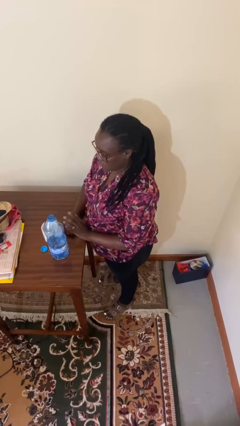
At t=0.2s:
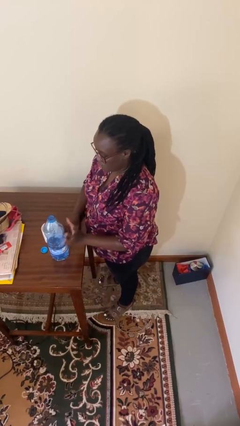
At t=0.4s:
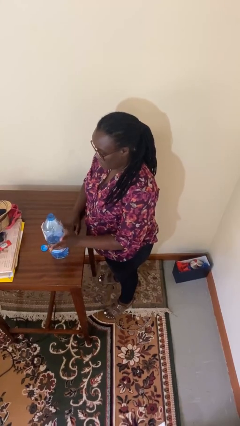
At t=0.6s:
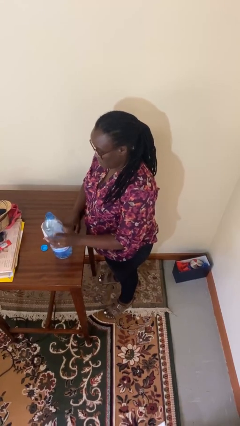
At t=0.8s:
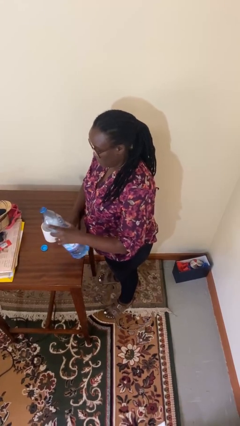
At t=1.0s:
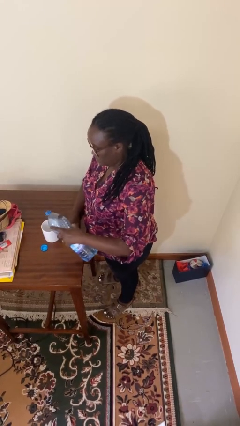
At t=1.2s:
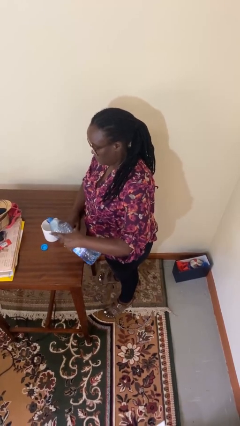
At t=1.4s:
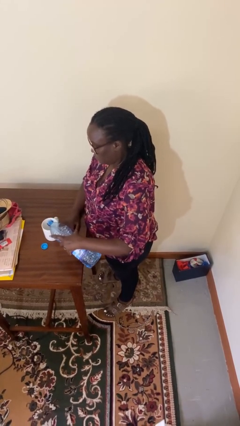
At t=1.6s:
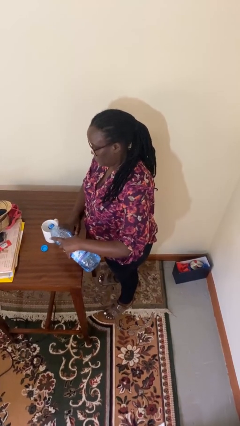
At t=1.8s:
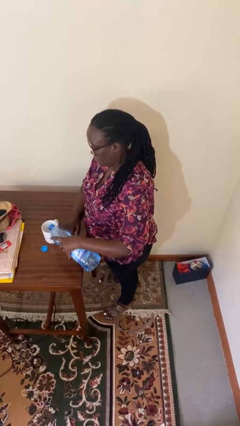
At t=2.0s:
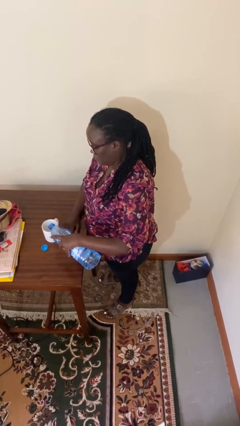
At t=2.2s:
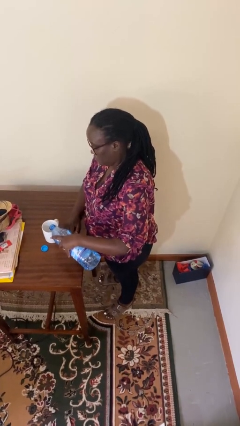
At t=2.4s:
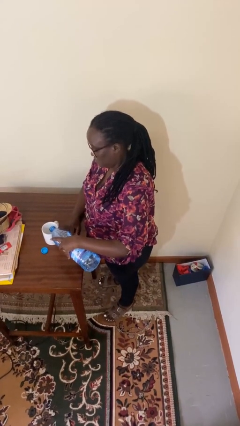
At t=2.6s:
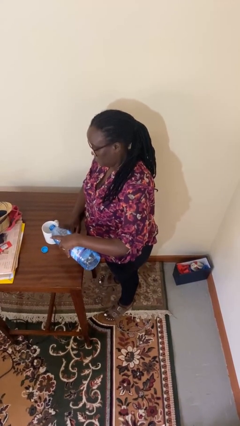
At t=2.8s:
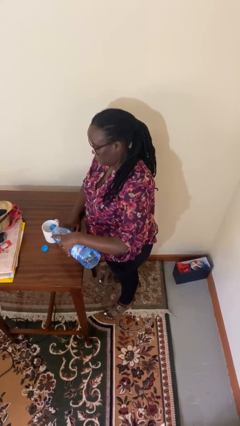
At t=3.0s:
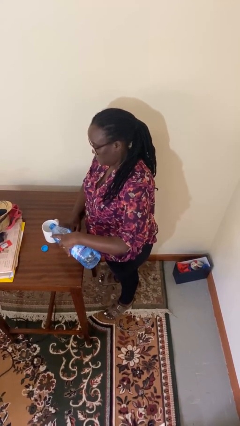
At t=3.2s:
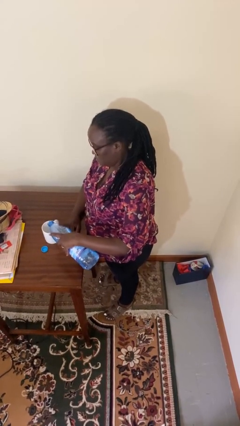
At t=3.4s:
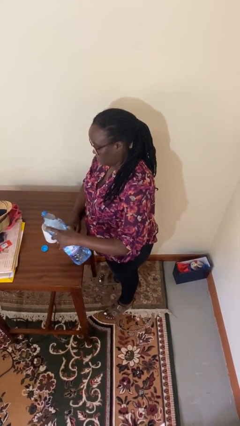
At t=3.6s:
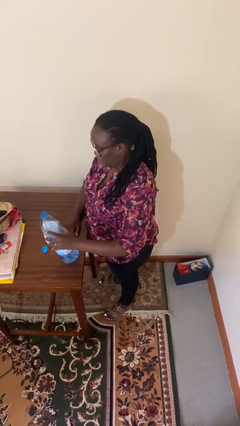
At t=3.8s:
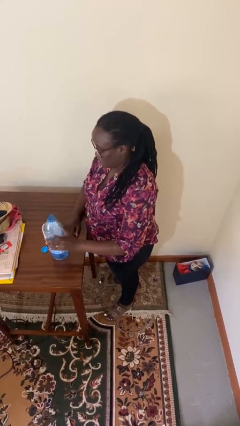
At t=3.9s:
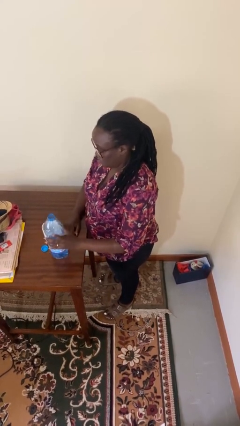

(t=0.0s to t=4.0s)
person pours liquid into cup

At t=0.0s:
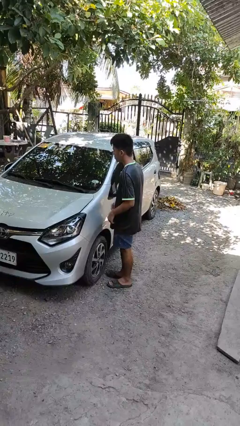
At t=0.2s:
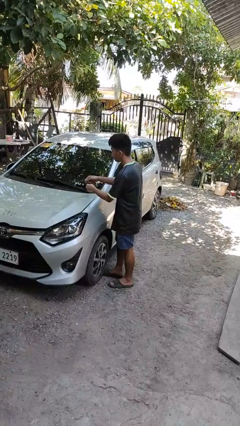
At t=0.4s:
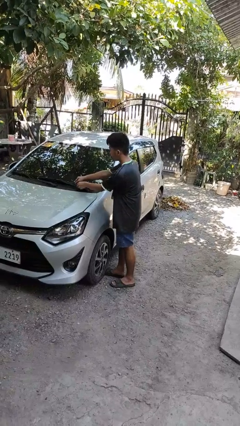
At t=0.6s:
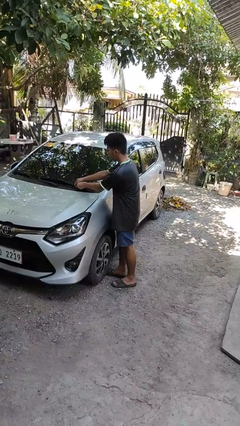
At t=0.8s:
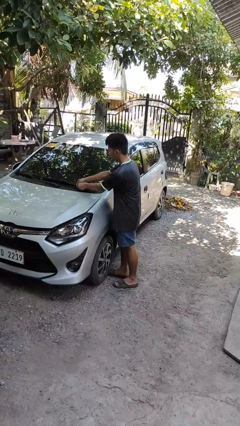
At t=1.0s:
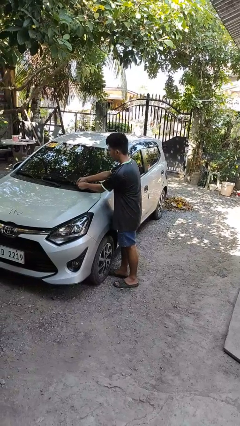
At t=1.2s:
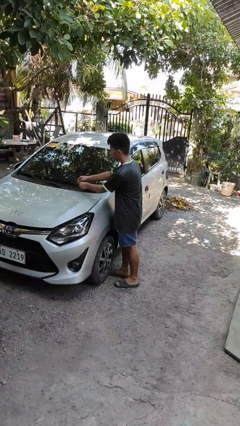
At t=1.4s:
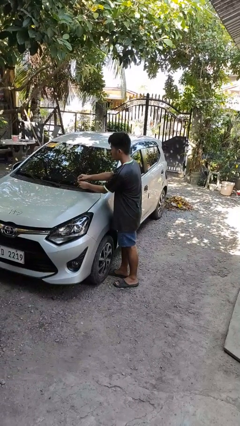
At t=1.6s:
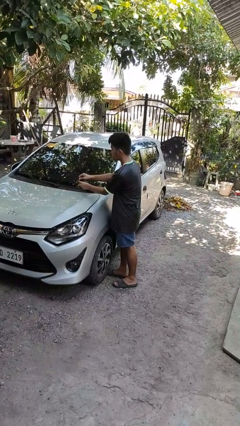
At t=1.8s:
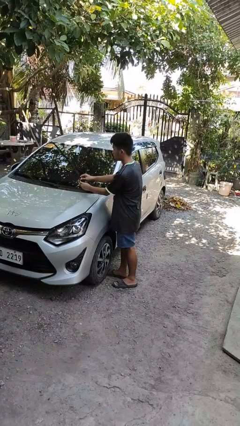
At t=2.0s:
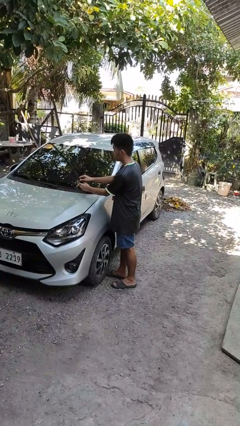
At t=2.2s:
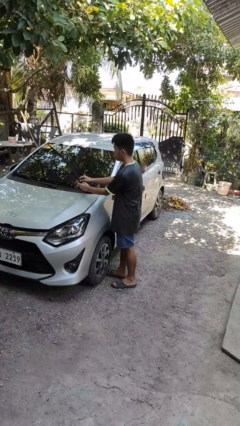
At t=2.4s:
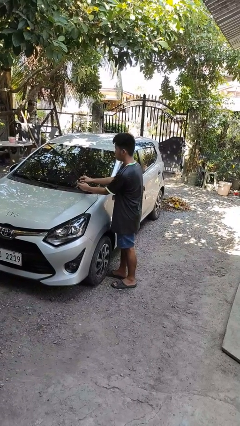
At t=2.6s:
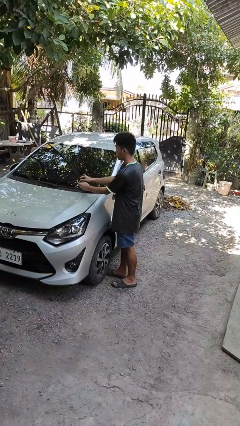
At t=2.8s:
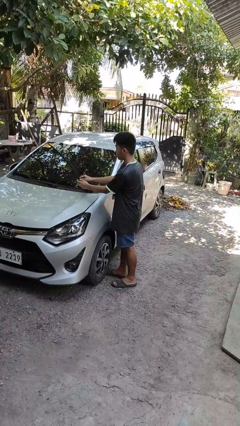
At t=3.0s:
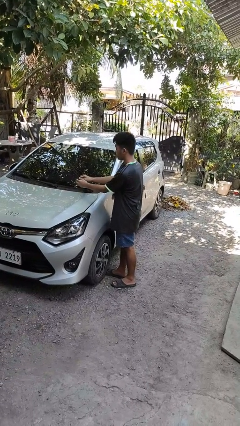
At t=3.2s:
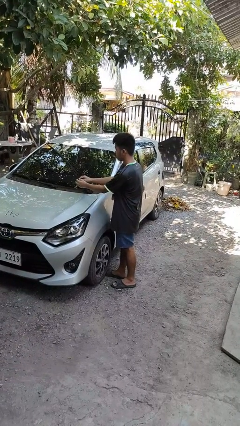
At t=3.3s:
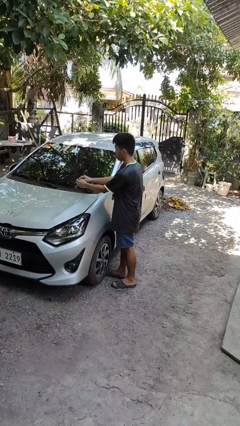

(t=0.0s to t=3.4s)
person flips up car wipers

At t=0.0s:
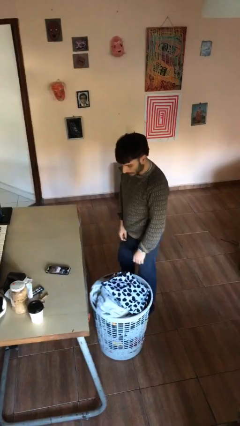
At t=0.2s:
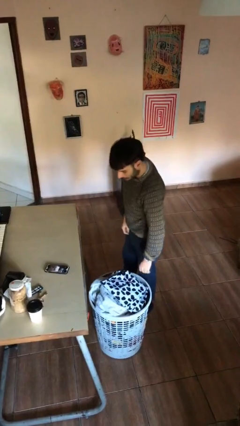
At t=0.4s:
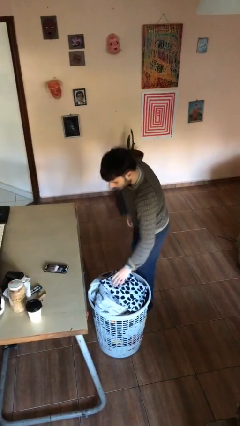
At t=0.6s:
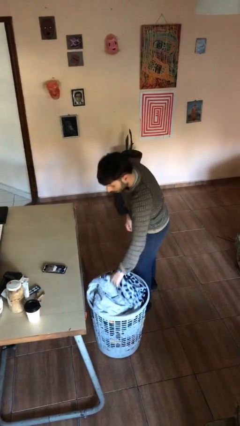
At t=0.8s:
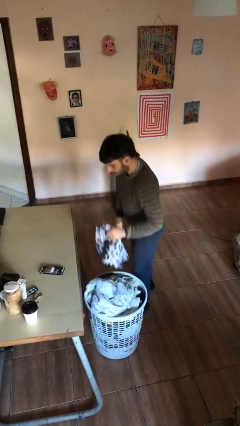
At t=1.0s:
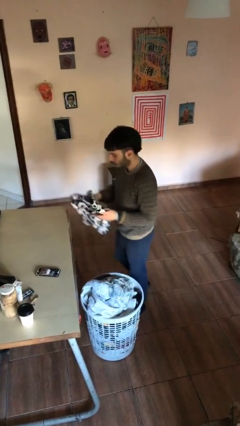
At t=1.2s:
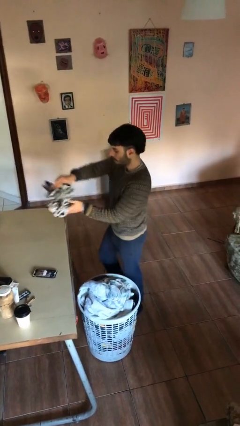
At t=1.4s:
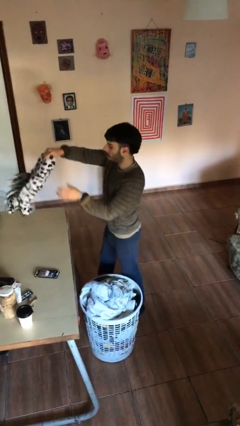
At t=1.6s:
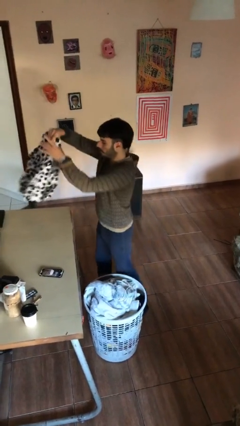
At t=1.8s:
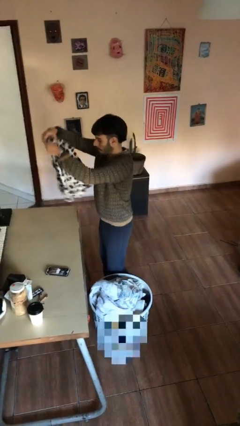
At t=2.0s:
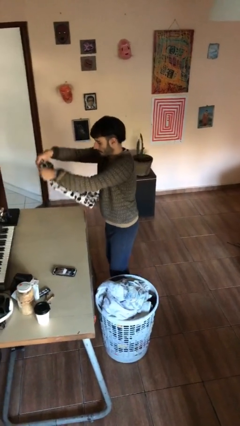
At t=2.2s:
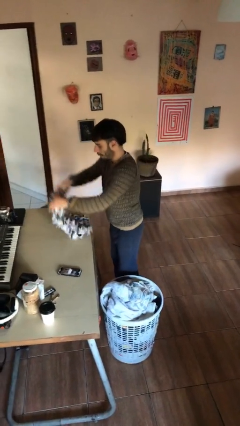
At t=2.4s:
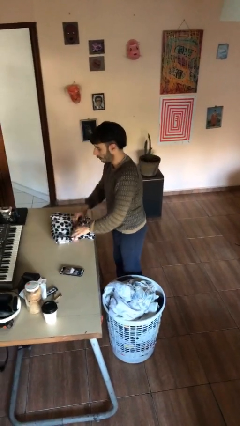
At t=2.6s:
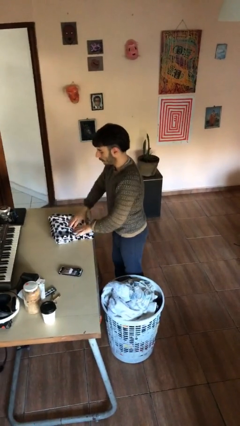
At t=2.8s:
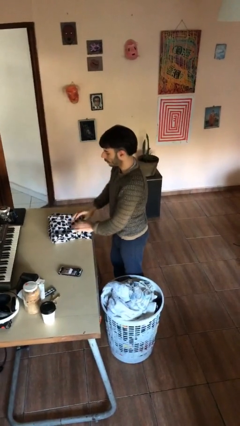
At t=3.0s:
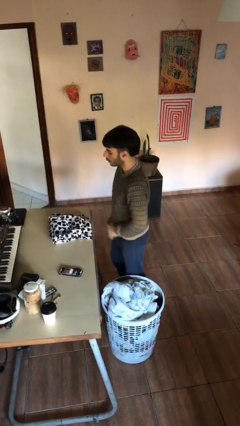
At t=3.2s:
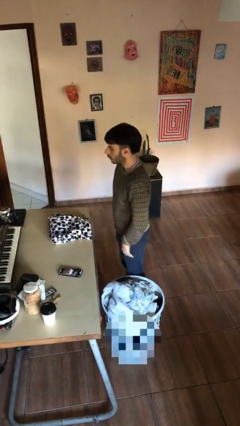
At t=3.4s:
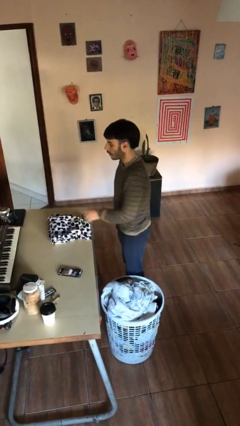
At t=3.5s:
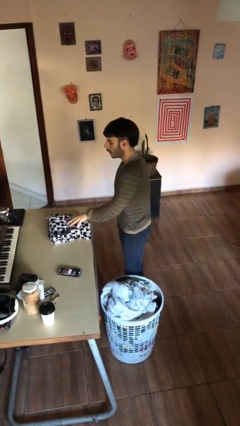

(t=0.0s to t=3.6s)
person folds pants

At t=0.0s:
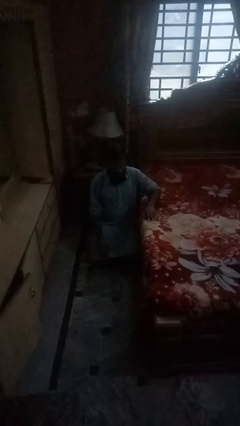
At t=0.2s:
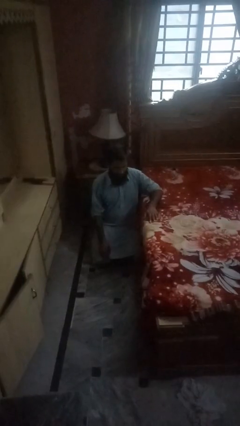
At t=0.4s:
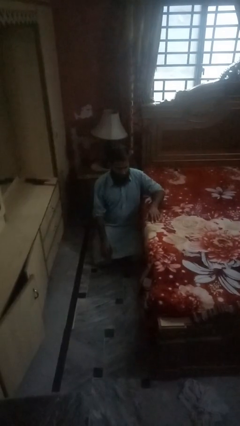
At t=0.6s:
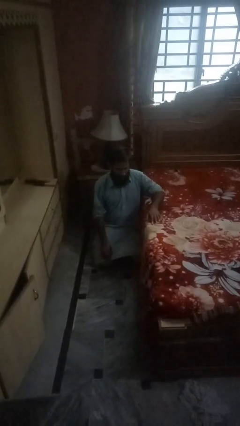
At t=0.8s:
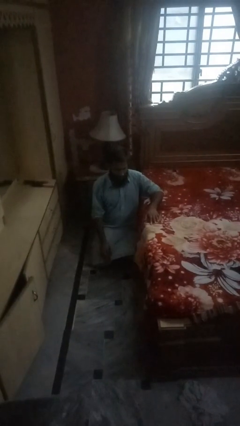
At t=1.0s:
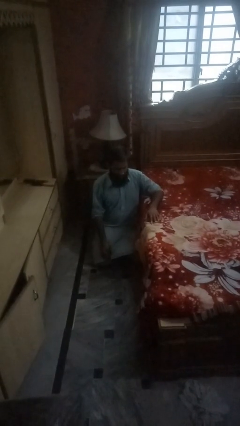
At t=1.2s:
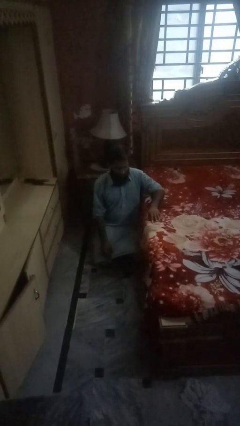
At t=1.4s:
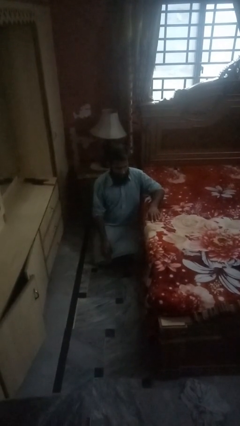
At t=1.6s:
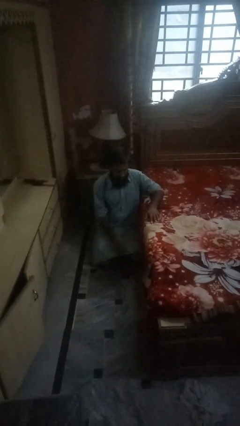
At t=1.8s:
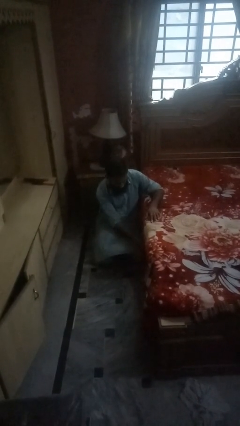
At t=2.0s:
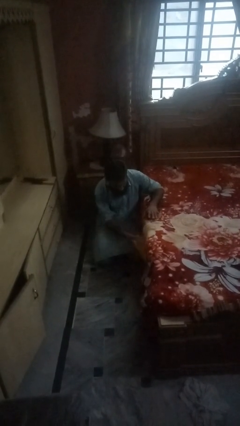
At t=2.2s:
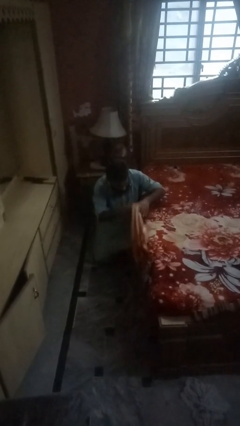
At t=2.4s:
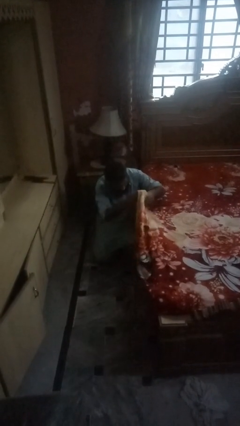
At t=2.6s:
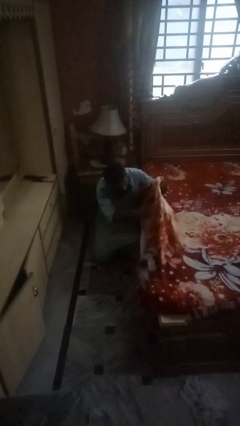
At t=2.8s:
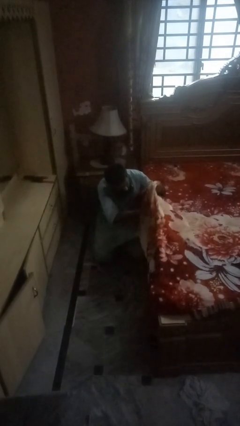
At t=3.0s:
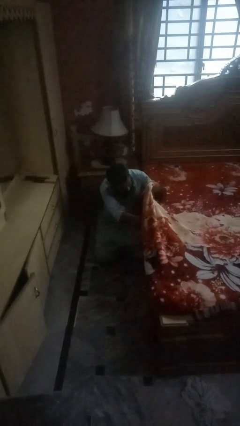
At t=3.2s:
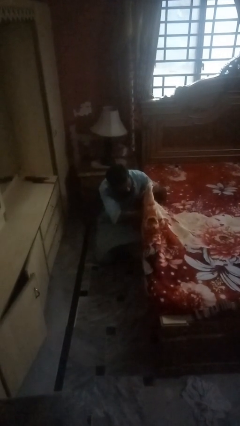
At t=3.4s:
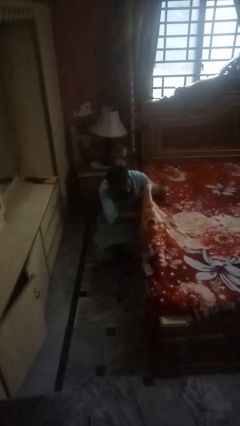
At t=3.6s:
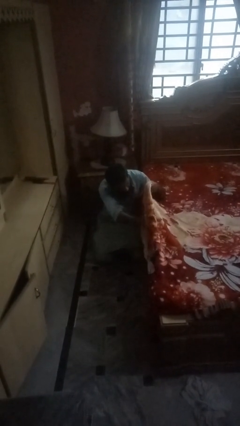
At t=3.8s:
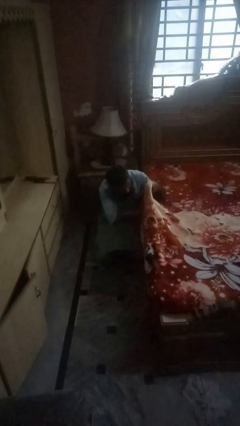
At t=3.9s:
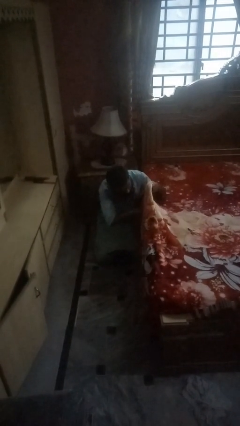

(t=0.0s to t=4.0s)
person searches under bed

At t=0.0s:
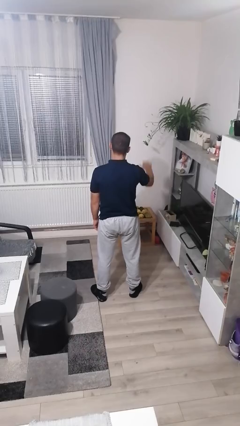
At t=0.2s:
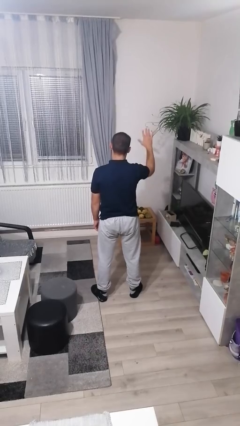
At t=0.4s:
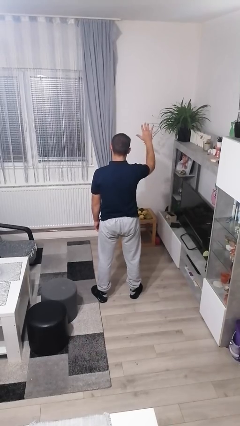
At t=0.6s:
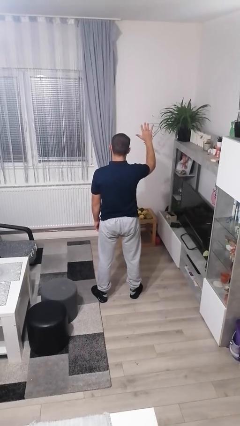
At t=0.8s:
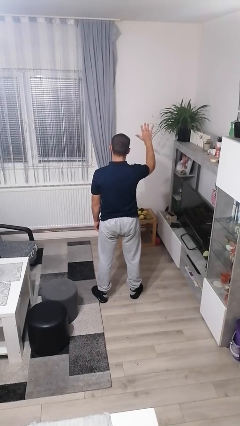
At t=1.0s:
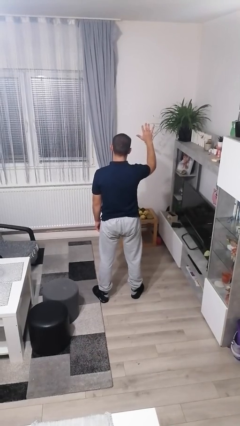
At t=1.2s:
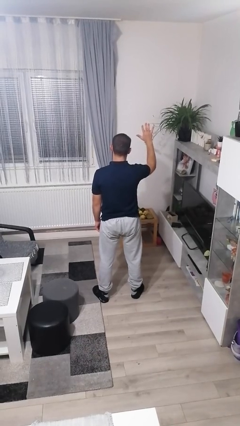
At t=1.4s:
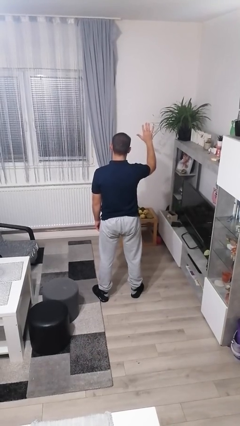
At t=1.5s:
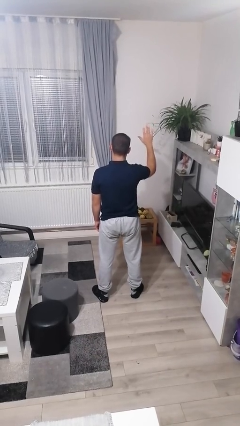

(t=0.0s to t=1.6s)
person gestures number five

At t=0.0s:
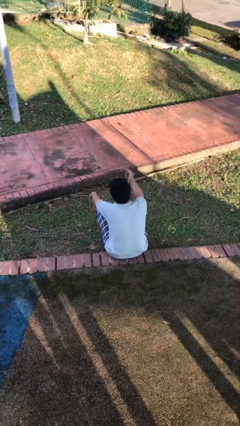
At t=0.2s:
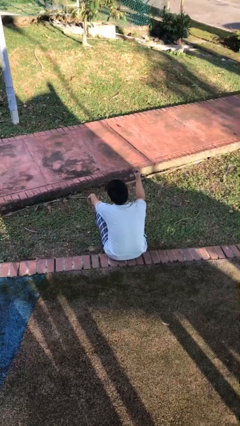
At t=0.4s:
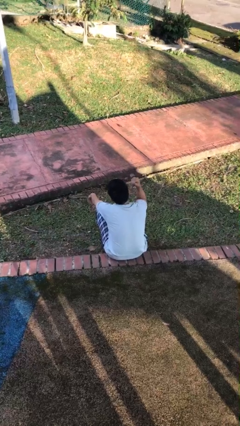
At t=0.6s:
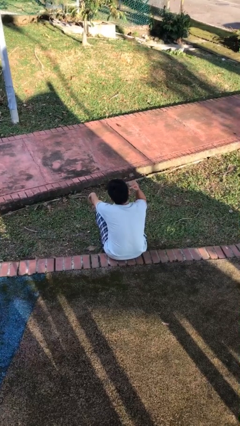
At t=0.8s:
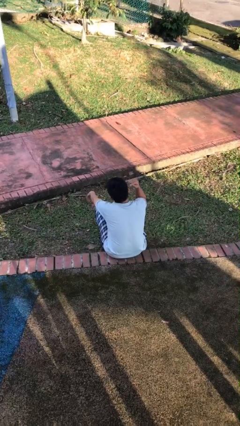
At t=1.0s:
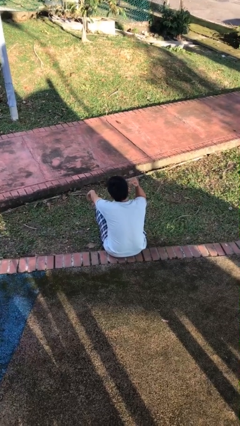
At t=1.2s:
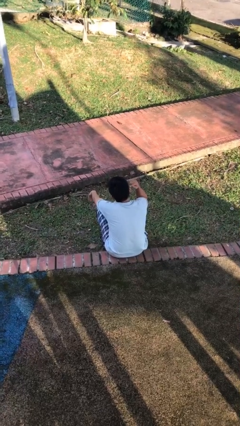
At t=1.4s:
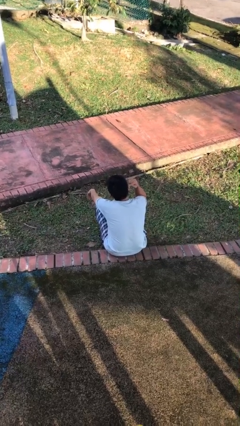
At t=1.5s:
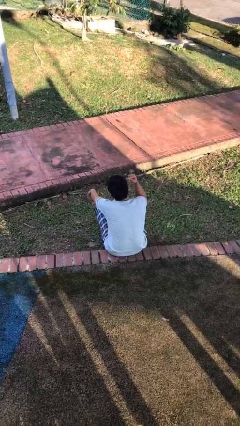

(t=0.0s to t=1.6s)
person gestures listen closely
